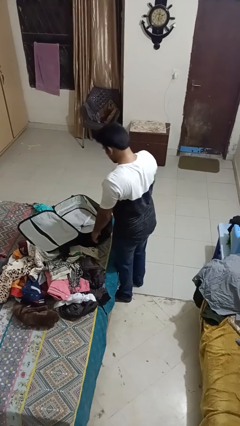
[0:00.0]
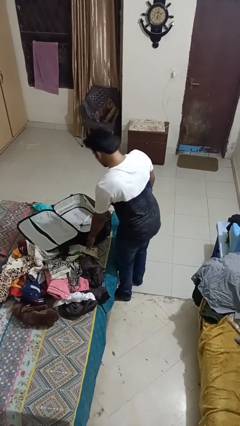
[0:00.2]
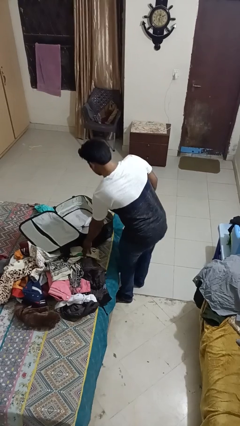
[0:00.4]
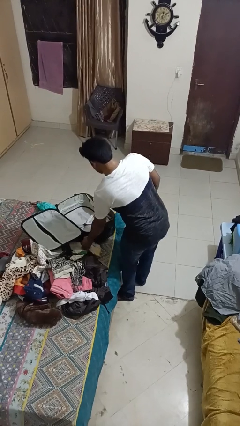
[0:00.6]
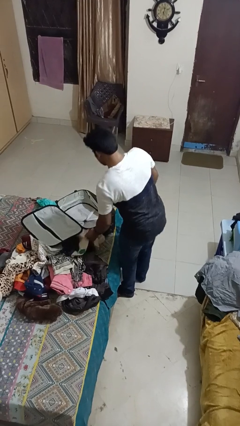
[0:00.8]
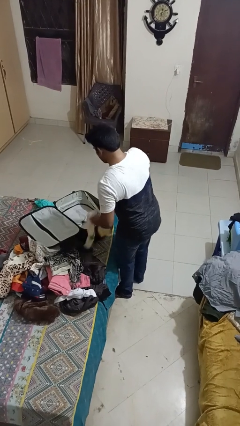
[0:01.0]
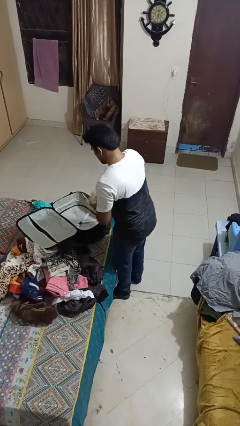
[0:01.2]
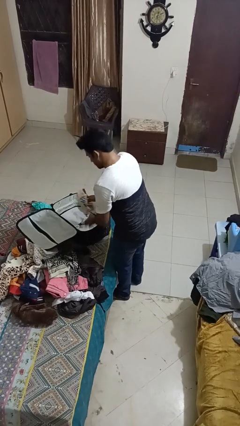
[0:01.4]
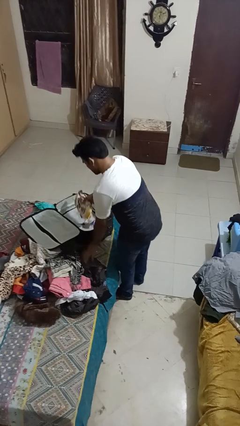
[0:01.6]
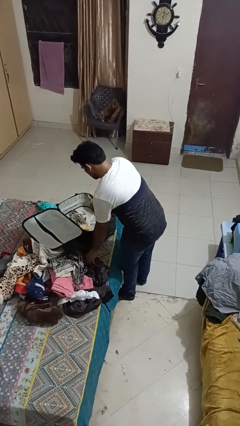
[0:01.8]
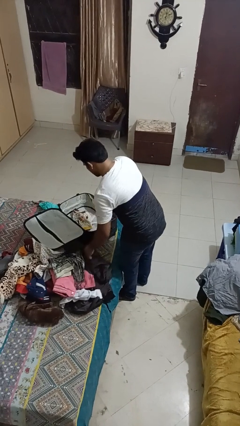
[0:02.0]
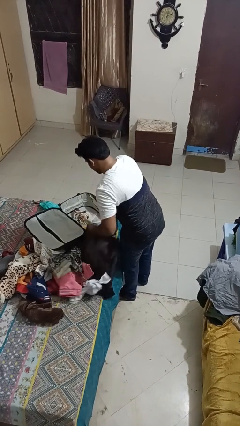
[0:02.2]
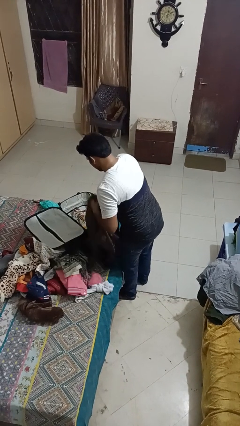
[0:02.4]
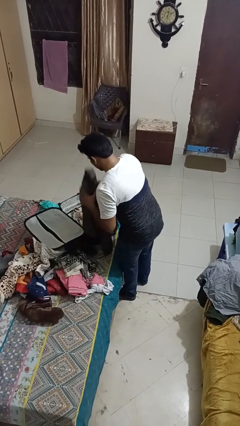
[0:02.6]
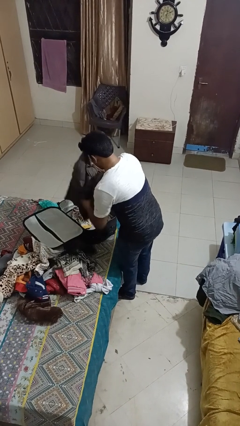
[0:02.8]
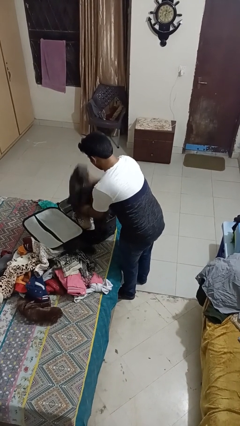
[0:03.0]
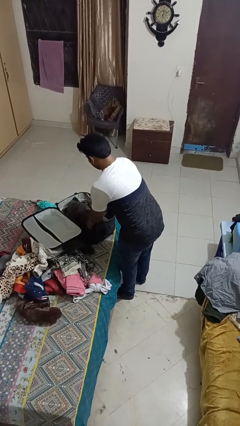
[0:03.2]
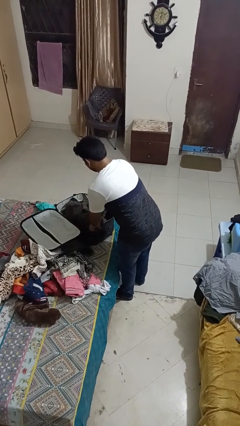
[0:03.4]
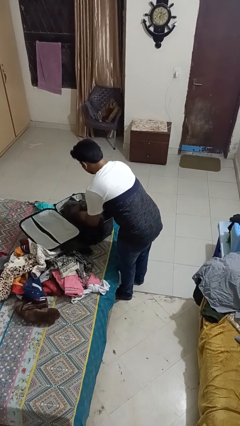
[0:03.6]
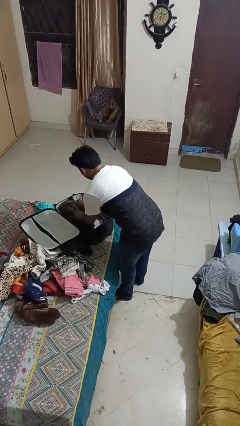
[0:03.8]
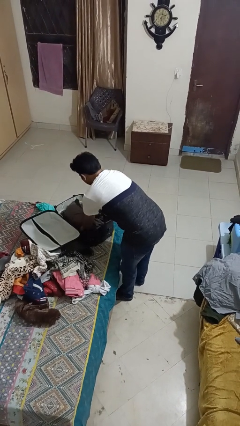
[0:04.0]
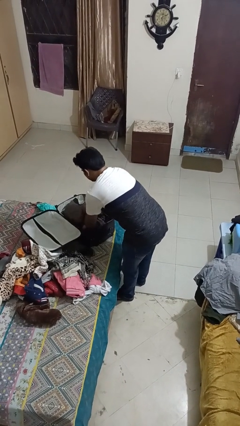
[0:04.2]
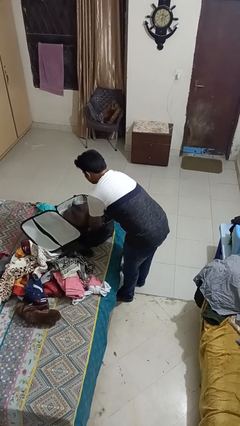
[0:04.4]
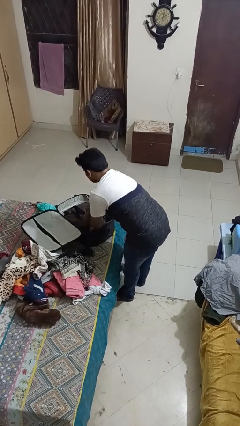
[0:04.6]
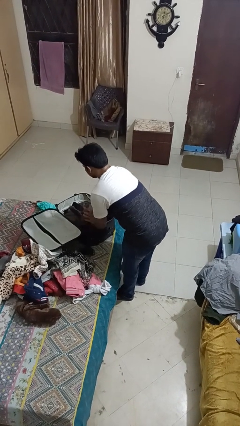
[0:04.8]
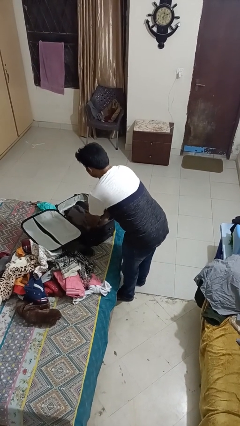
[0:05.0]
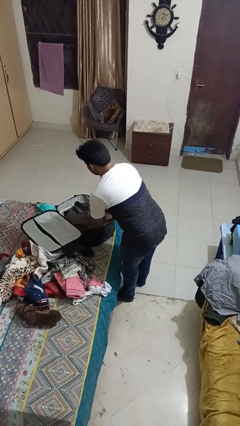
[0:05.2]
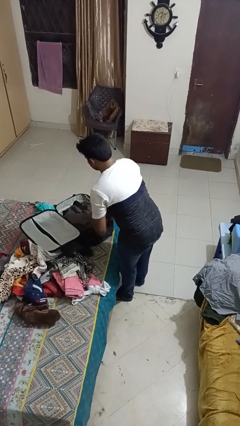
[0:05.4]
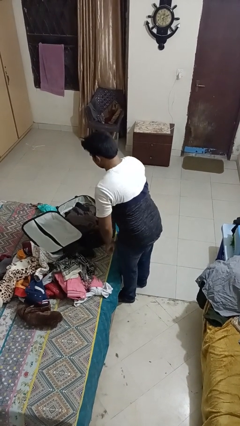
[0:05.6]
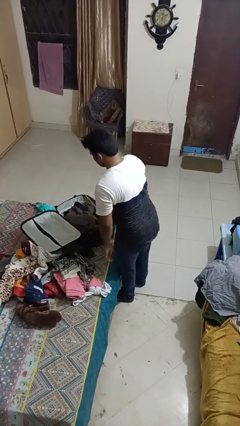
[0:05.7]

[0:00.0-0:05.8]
person loads clothes into suitcase

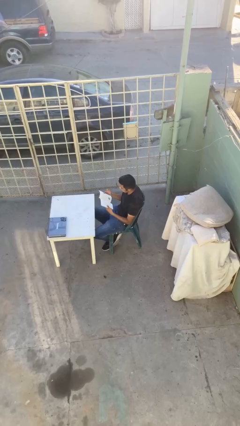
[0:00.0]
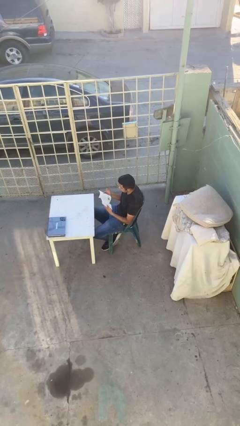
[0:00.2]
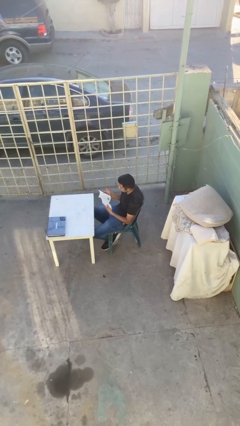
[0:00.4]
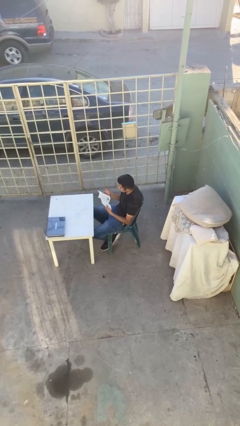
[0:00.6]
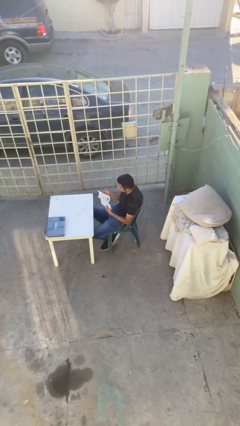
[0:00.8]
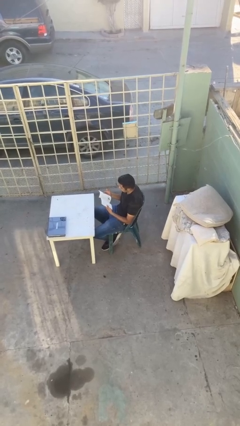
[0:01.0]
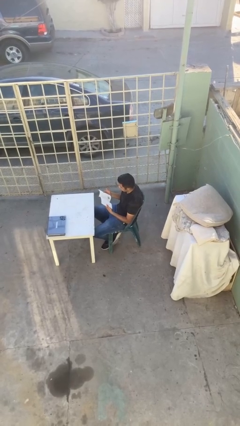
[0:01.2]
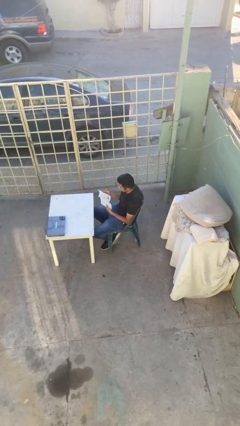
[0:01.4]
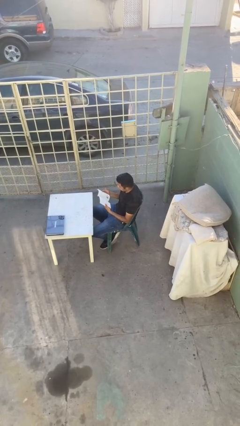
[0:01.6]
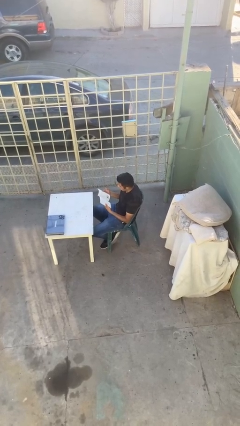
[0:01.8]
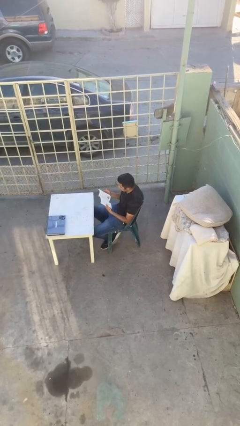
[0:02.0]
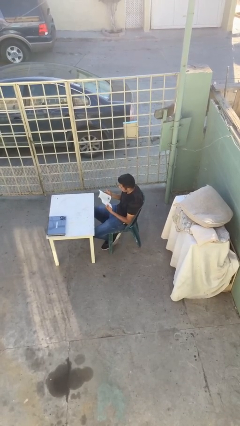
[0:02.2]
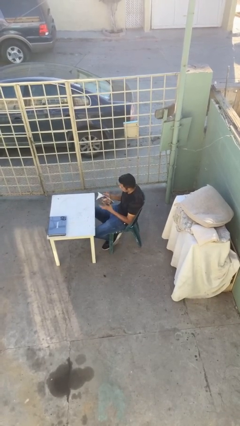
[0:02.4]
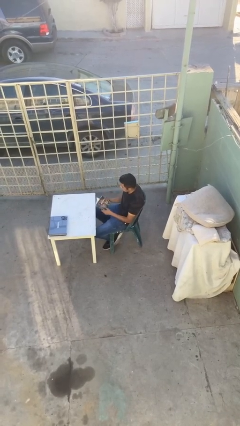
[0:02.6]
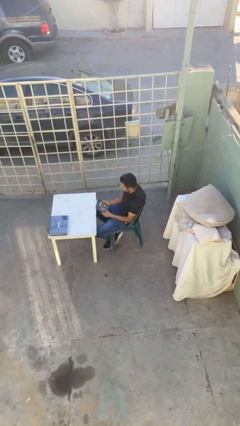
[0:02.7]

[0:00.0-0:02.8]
person reads document

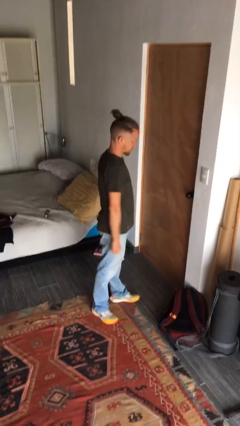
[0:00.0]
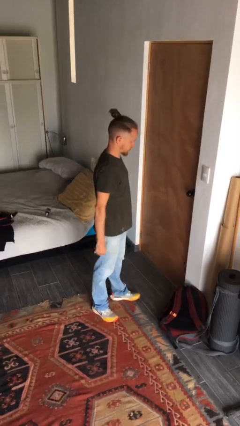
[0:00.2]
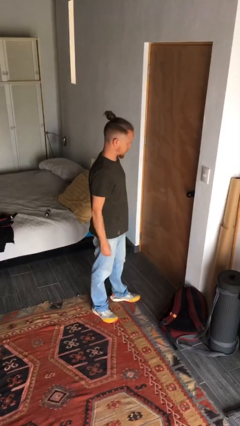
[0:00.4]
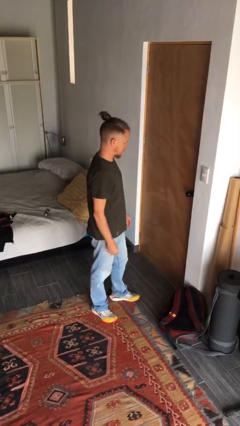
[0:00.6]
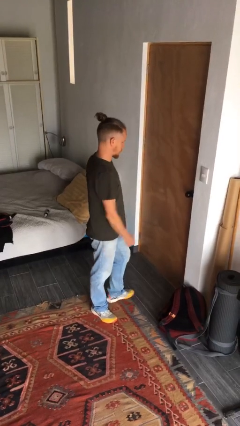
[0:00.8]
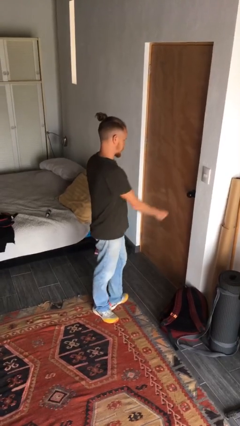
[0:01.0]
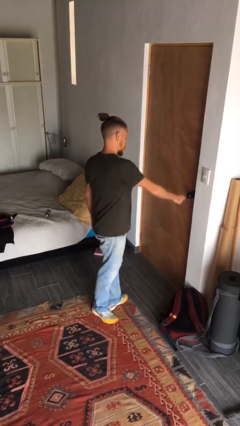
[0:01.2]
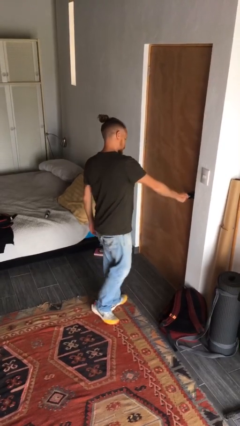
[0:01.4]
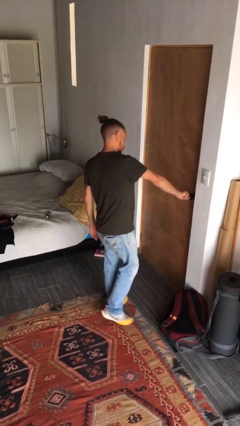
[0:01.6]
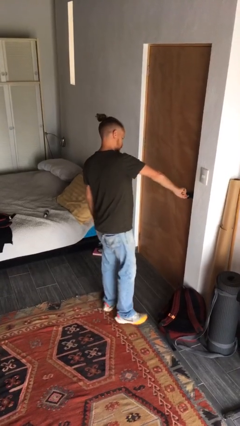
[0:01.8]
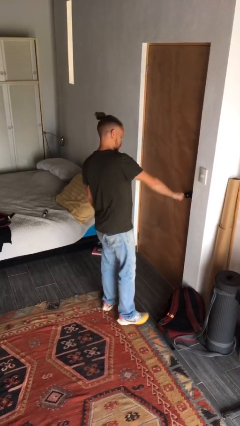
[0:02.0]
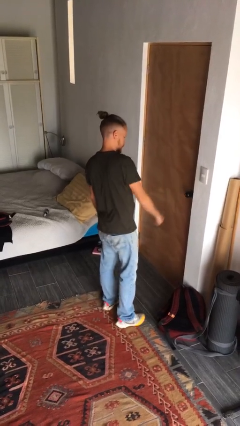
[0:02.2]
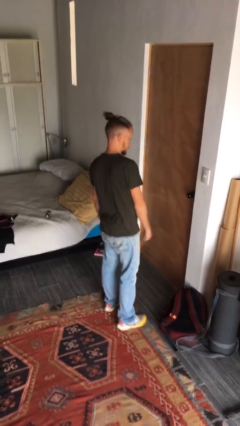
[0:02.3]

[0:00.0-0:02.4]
person unlocks door with keys

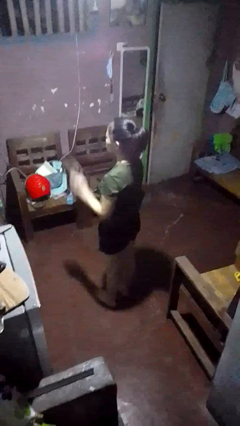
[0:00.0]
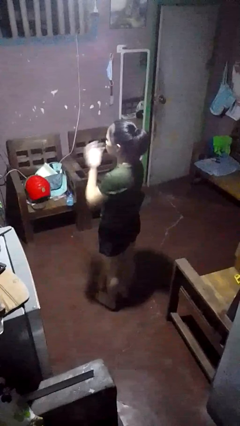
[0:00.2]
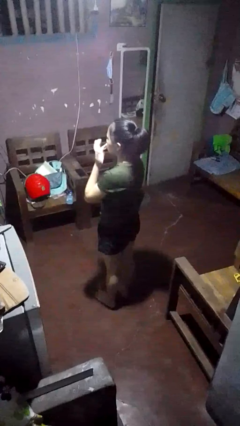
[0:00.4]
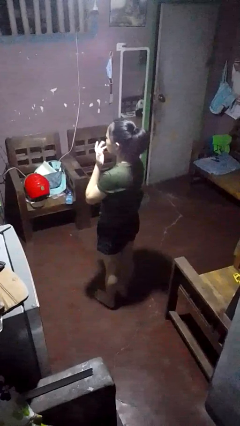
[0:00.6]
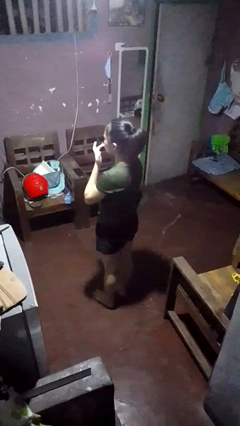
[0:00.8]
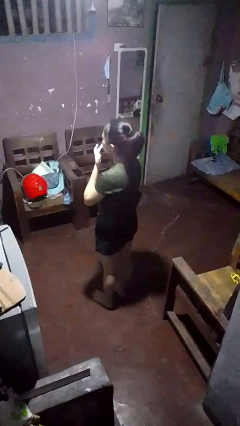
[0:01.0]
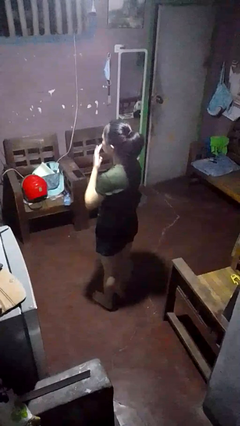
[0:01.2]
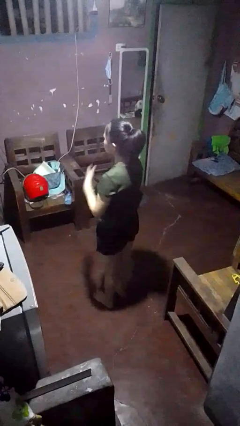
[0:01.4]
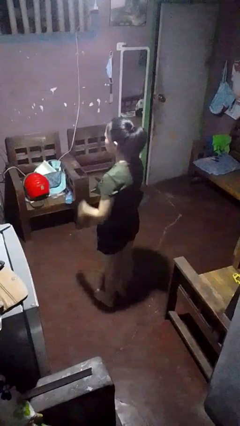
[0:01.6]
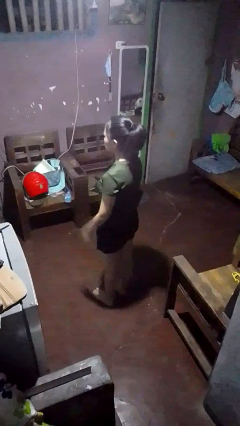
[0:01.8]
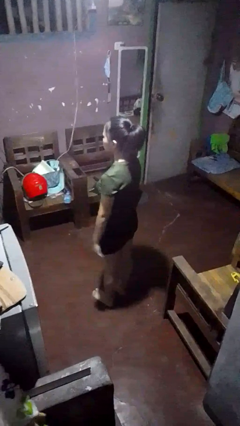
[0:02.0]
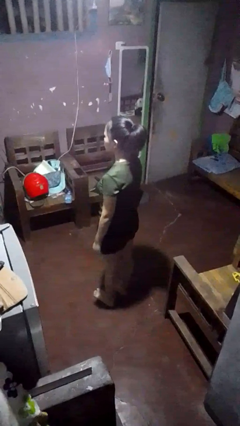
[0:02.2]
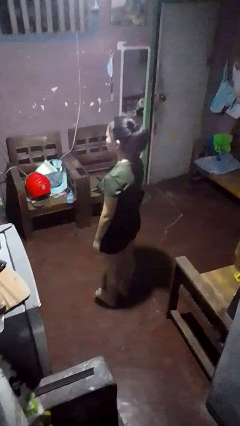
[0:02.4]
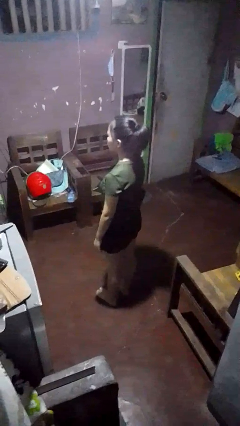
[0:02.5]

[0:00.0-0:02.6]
person licks fingers

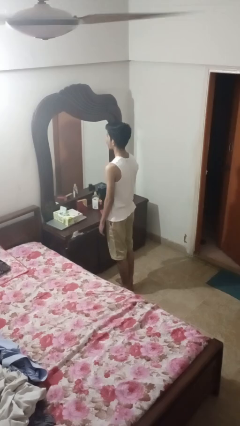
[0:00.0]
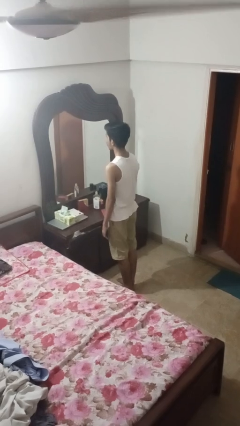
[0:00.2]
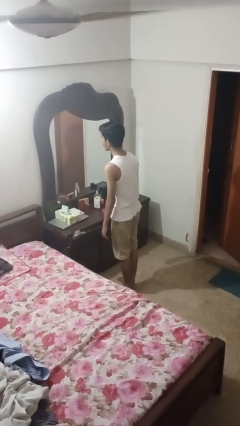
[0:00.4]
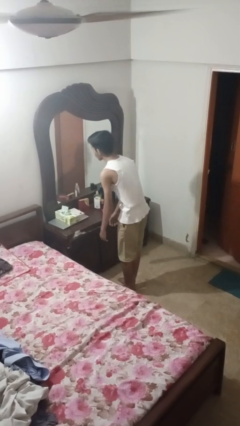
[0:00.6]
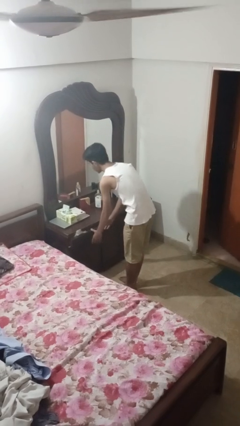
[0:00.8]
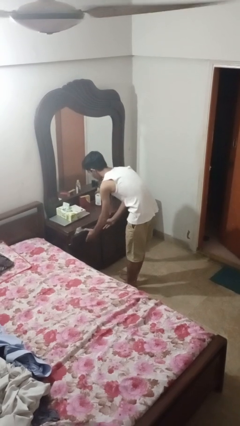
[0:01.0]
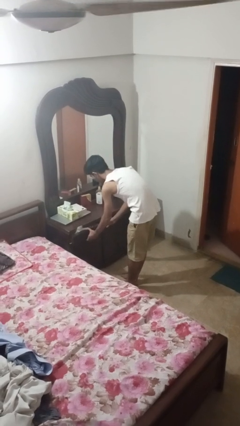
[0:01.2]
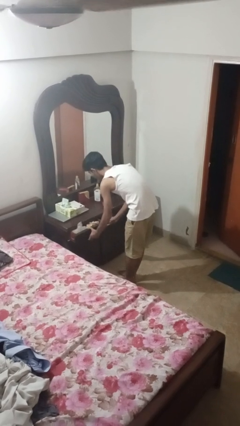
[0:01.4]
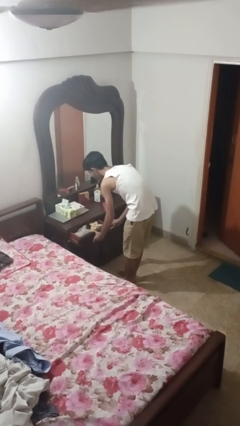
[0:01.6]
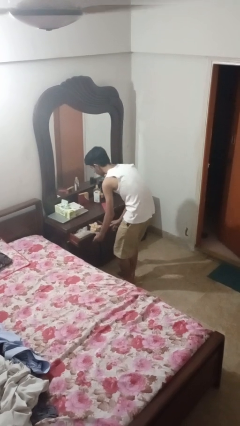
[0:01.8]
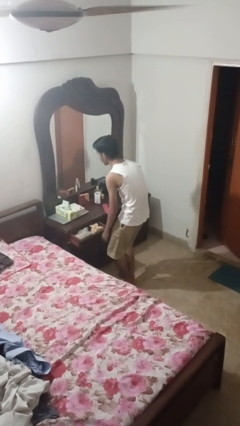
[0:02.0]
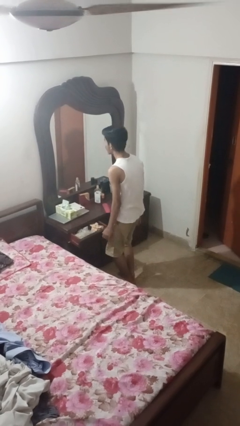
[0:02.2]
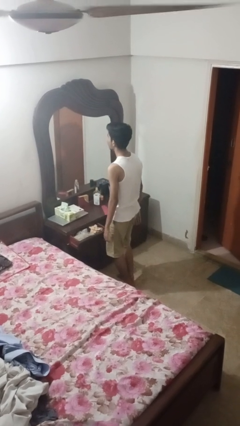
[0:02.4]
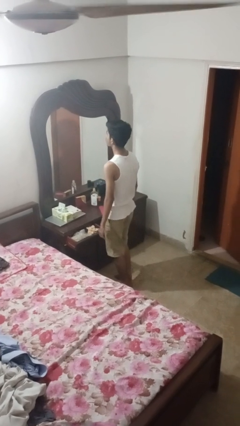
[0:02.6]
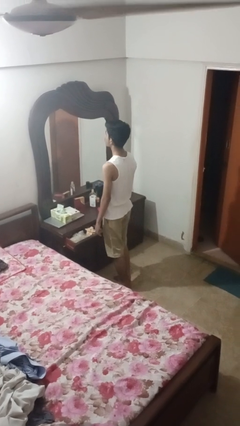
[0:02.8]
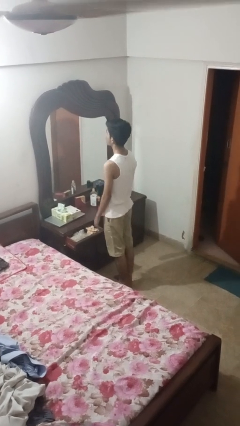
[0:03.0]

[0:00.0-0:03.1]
person opens dresser drawer

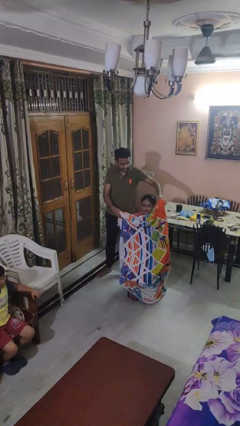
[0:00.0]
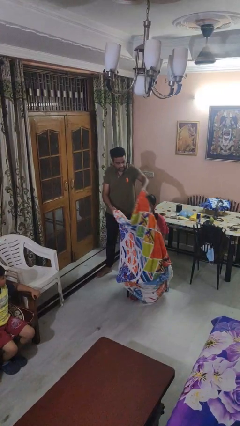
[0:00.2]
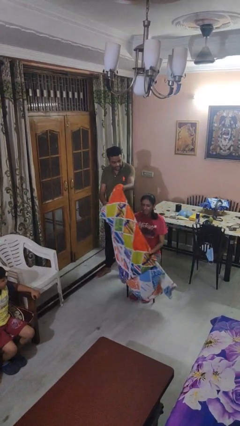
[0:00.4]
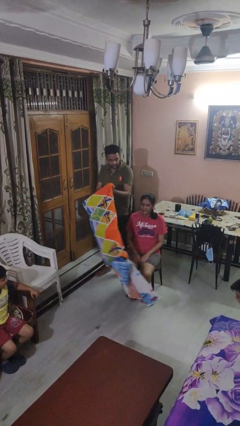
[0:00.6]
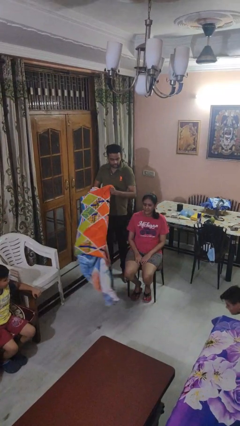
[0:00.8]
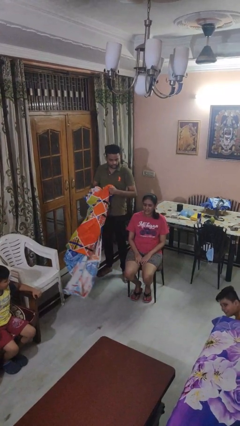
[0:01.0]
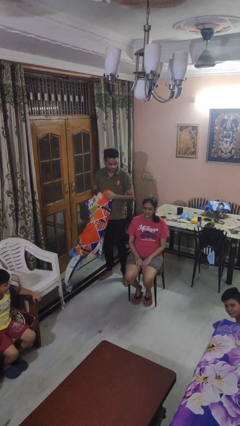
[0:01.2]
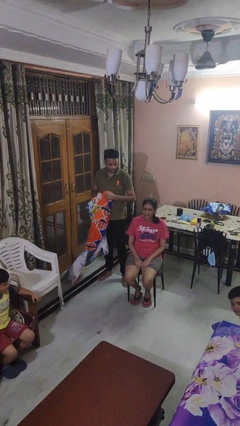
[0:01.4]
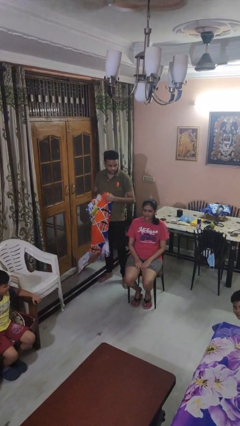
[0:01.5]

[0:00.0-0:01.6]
person uncovers friend with blanket
